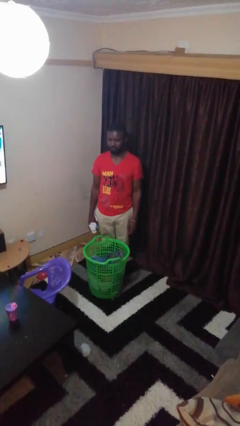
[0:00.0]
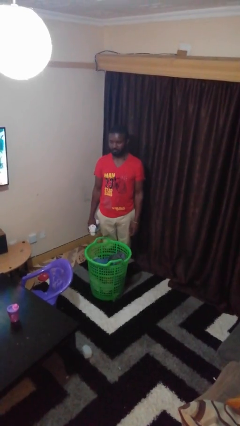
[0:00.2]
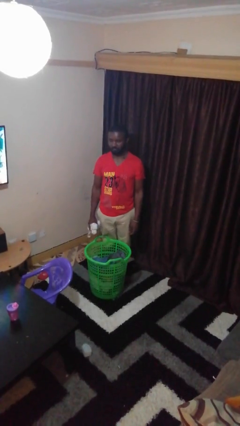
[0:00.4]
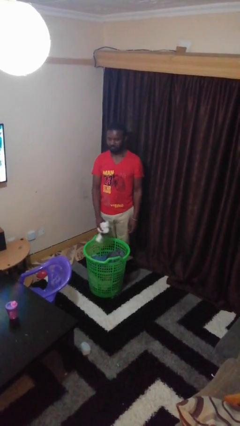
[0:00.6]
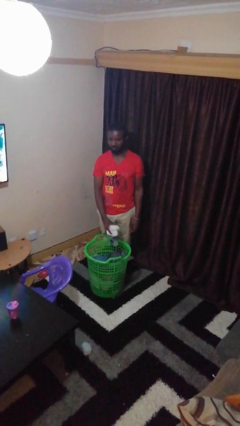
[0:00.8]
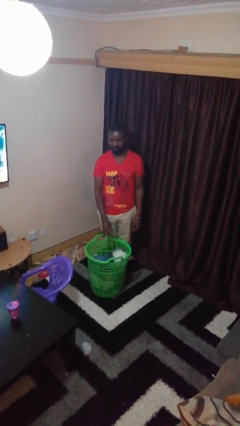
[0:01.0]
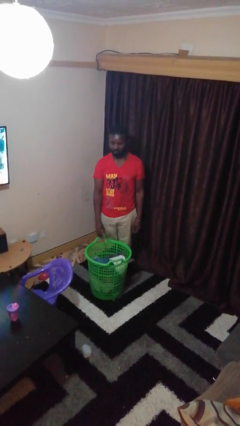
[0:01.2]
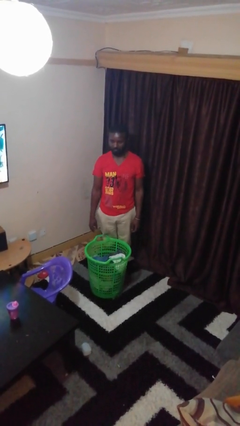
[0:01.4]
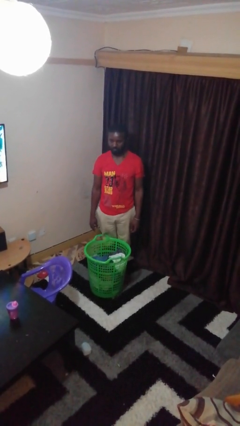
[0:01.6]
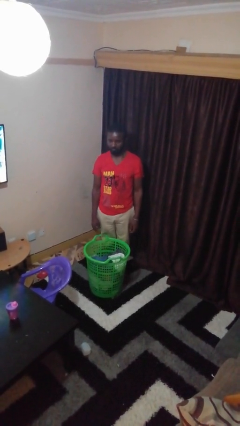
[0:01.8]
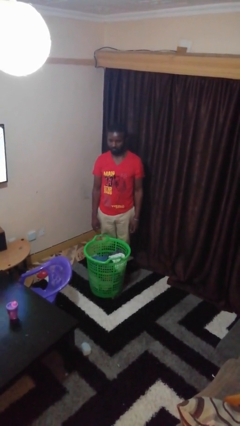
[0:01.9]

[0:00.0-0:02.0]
person puts object into basket

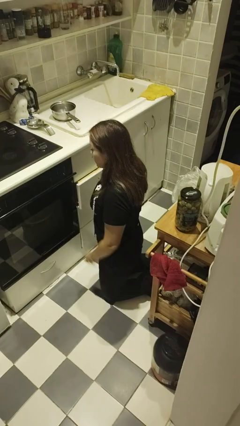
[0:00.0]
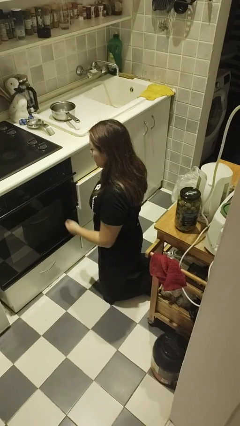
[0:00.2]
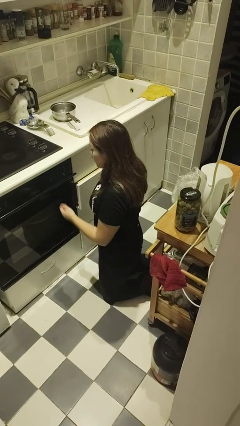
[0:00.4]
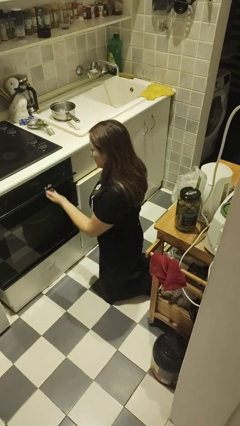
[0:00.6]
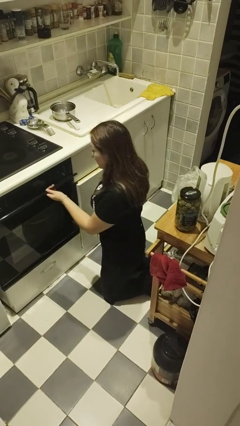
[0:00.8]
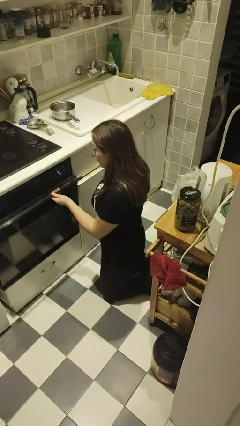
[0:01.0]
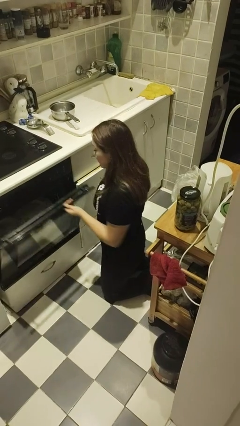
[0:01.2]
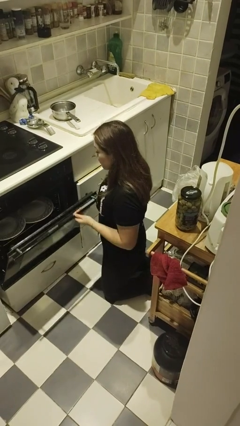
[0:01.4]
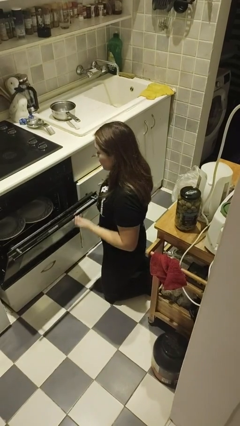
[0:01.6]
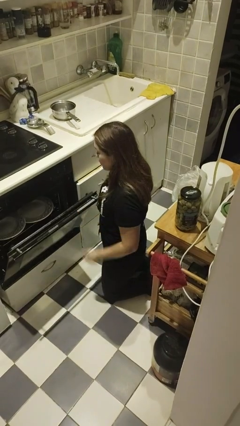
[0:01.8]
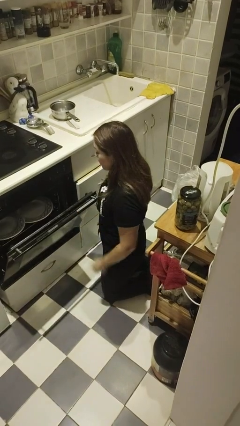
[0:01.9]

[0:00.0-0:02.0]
person opens oven door

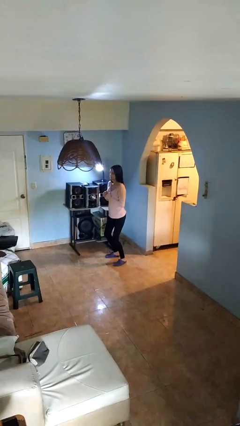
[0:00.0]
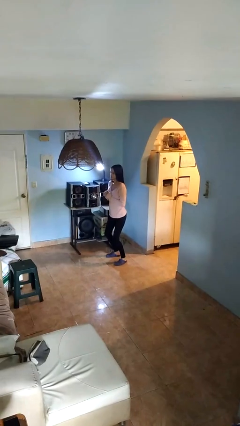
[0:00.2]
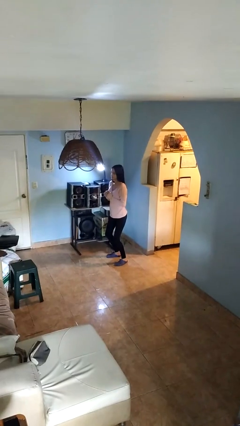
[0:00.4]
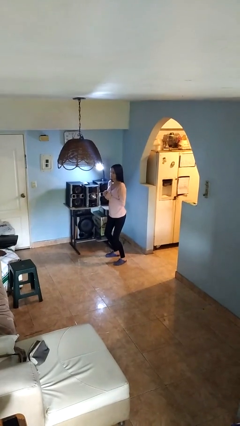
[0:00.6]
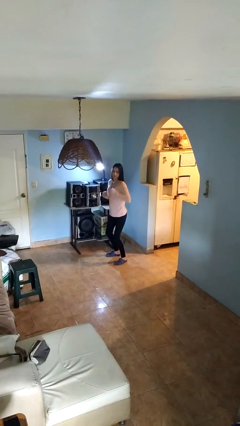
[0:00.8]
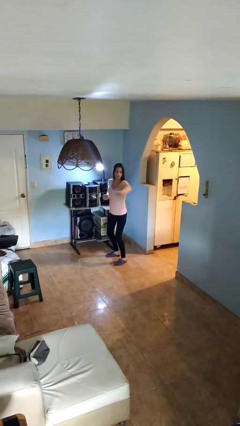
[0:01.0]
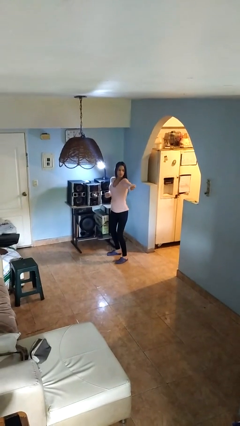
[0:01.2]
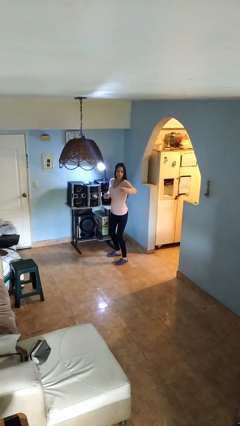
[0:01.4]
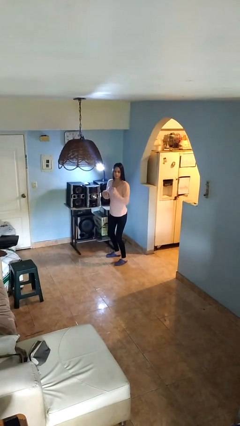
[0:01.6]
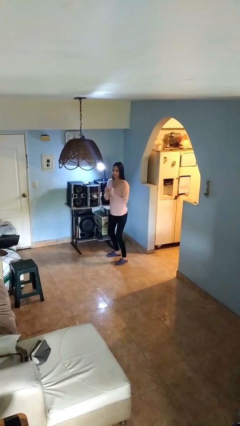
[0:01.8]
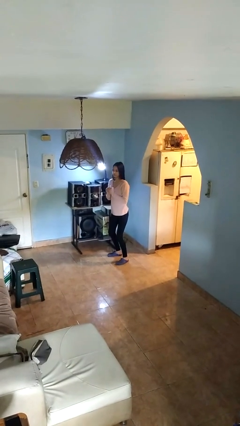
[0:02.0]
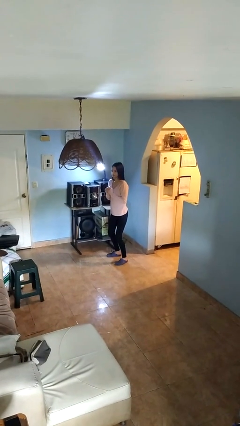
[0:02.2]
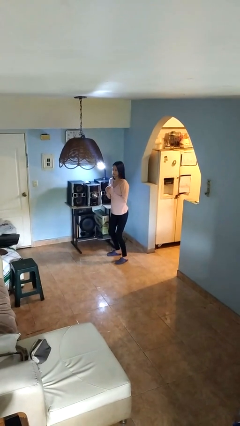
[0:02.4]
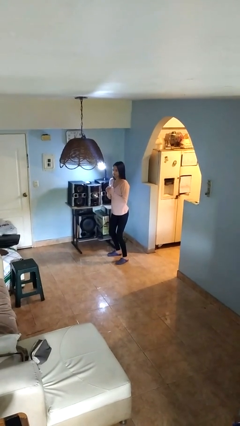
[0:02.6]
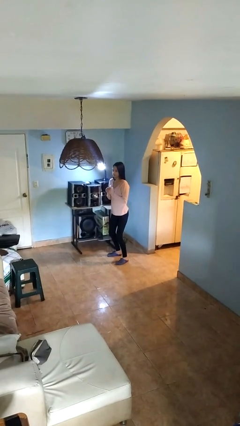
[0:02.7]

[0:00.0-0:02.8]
person karate chop

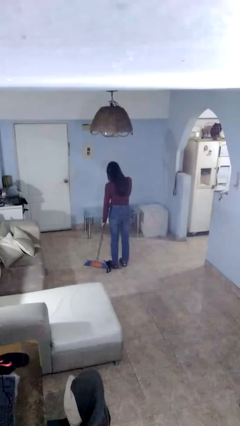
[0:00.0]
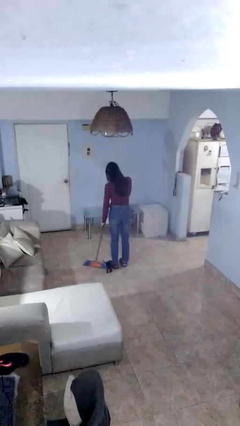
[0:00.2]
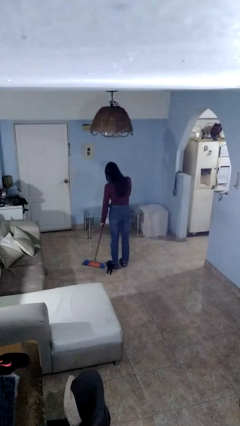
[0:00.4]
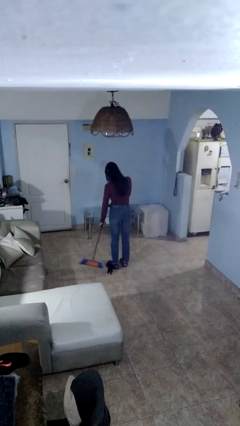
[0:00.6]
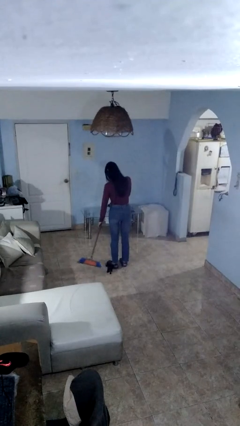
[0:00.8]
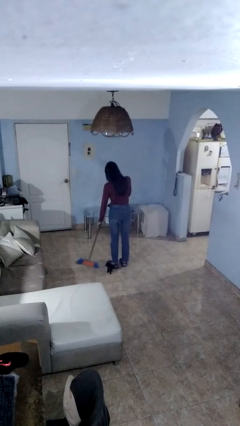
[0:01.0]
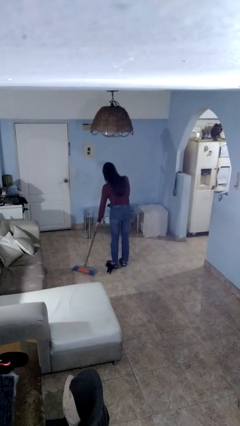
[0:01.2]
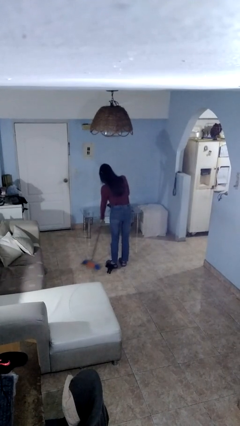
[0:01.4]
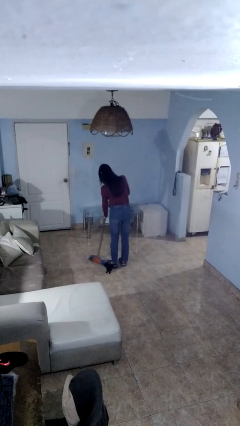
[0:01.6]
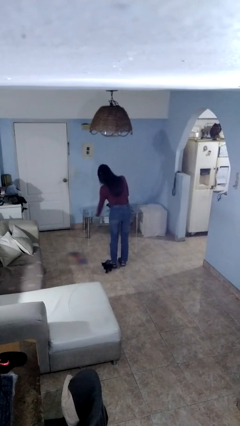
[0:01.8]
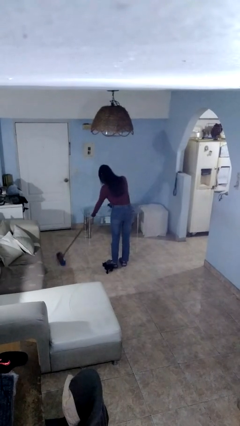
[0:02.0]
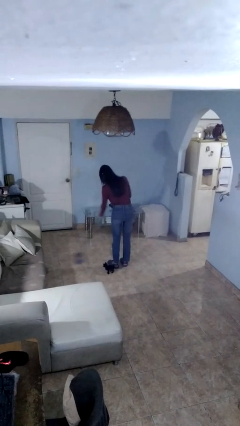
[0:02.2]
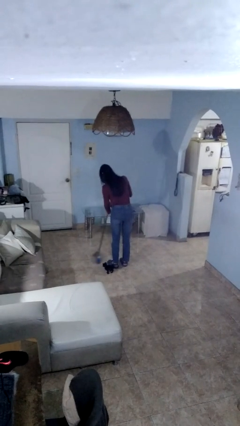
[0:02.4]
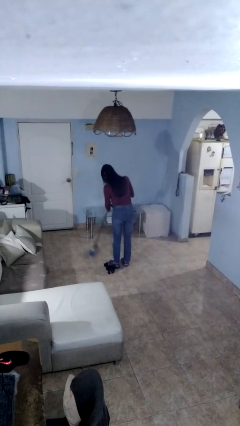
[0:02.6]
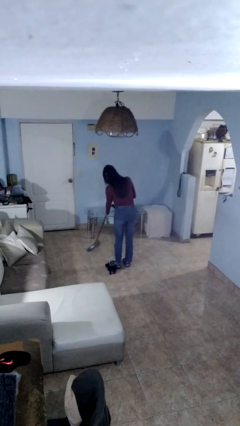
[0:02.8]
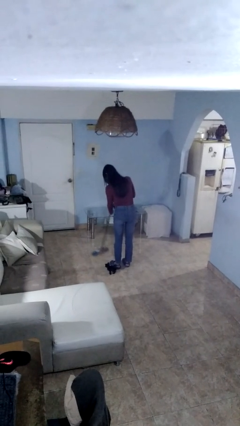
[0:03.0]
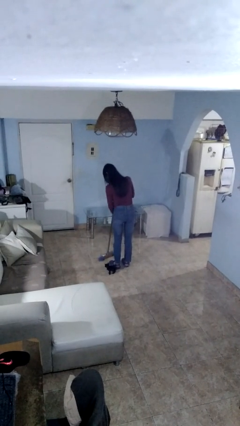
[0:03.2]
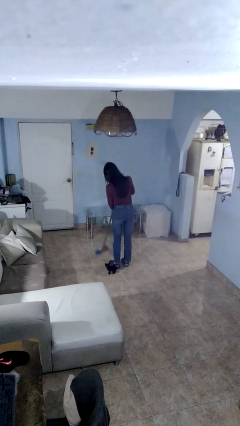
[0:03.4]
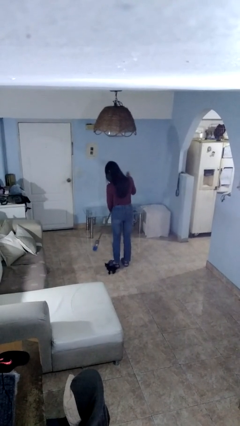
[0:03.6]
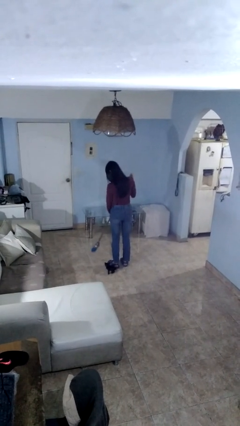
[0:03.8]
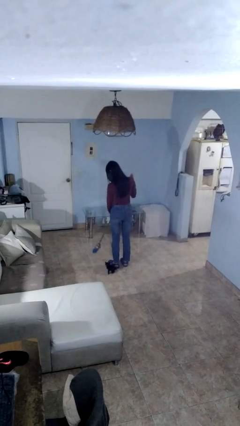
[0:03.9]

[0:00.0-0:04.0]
person sweeps floor

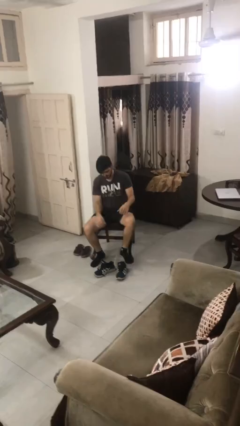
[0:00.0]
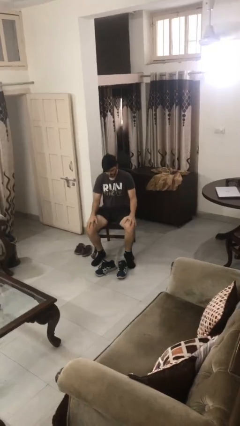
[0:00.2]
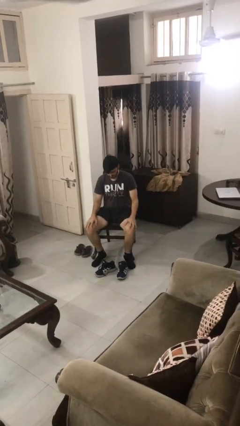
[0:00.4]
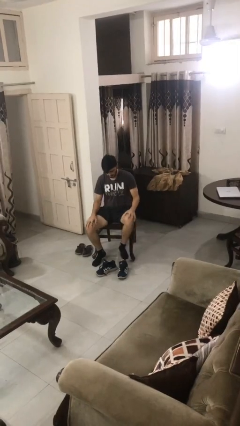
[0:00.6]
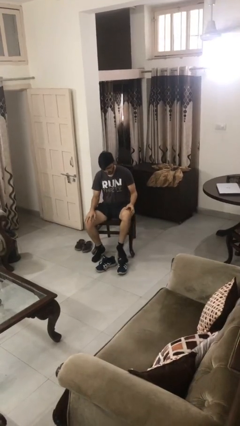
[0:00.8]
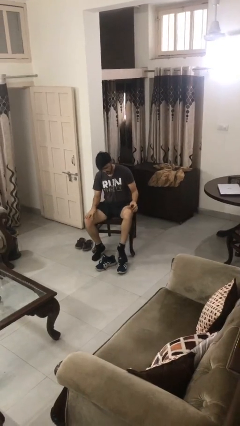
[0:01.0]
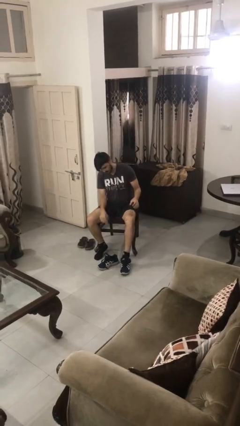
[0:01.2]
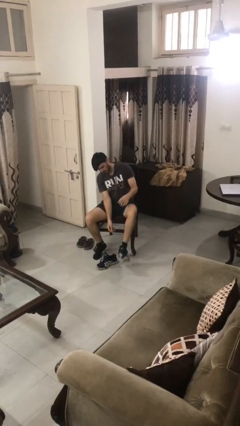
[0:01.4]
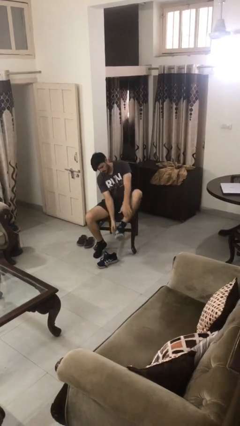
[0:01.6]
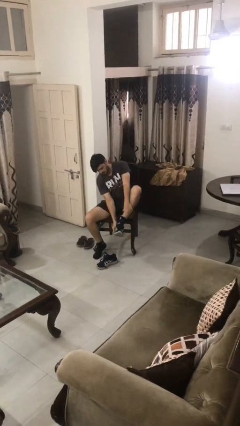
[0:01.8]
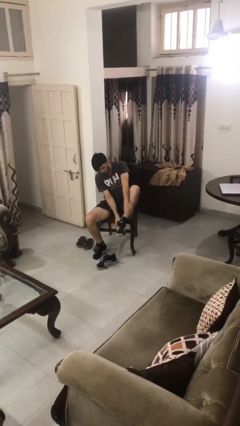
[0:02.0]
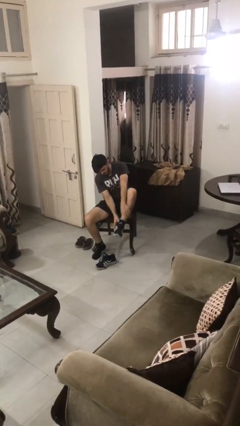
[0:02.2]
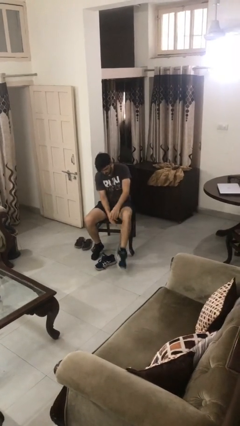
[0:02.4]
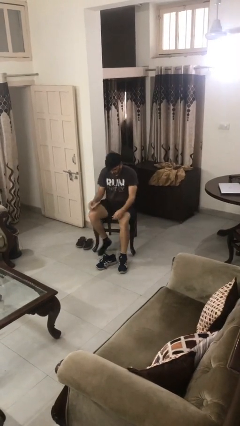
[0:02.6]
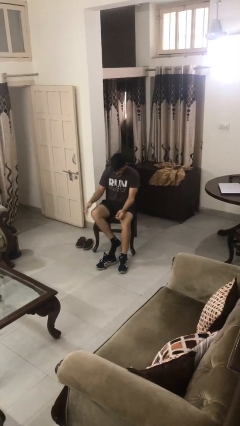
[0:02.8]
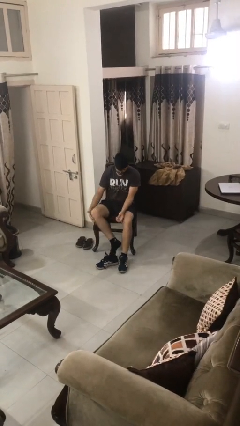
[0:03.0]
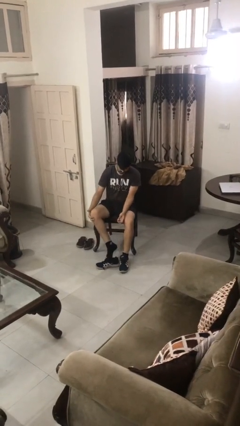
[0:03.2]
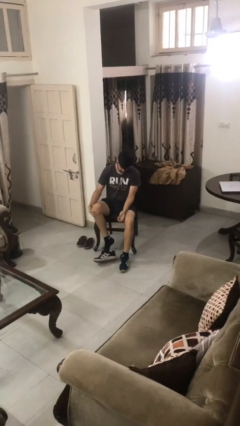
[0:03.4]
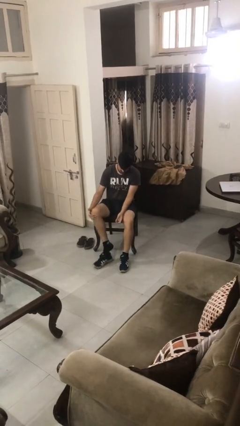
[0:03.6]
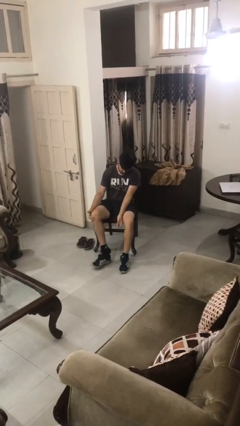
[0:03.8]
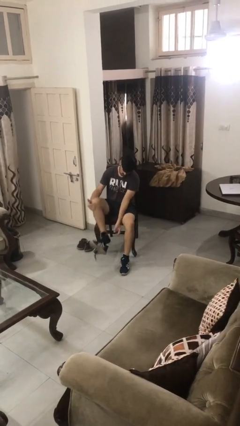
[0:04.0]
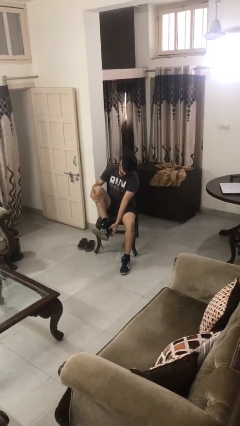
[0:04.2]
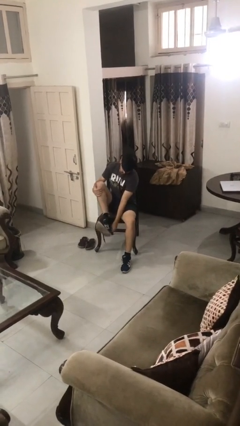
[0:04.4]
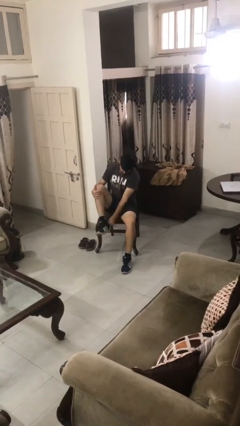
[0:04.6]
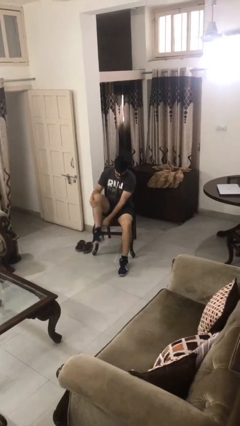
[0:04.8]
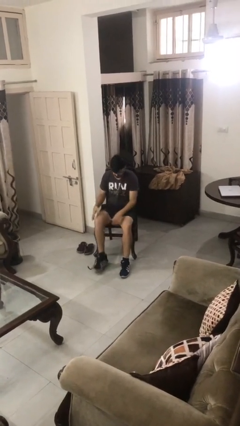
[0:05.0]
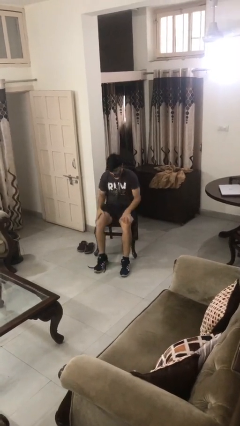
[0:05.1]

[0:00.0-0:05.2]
person puts on shoes

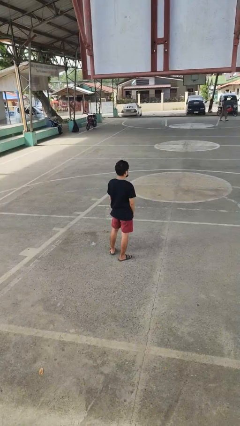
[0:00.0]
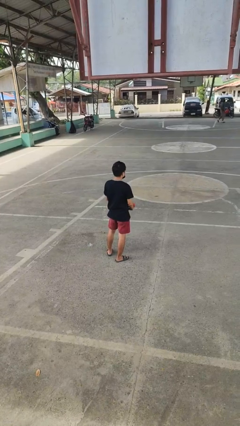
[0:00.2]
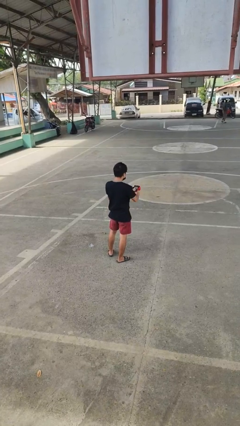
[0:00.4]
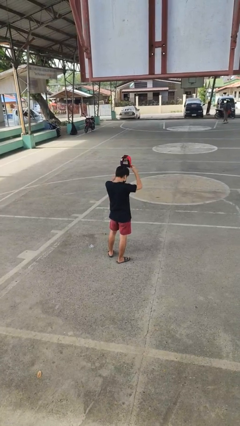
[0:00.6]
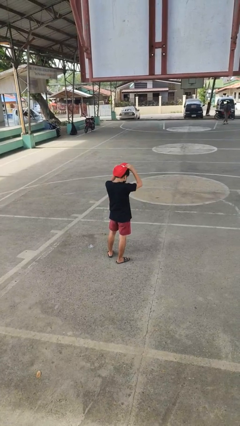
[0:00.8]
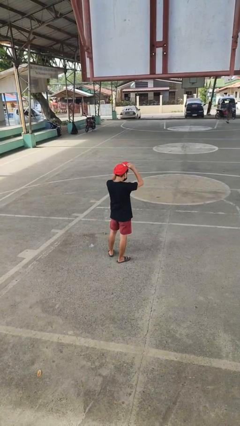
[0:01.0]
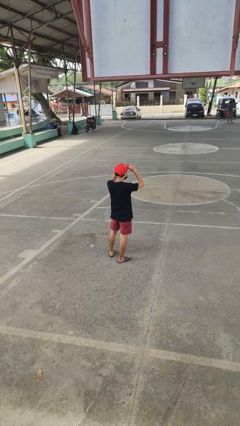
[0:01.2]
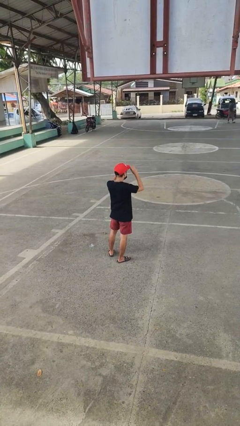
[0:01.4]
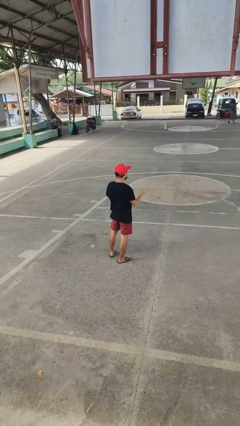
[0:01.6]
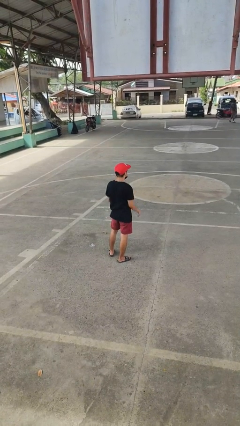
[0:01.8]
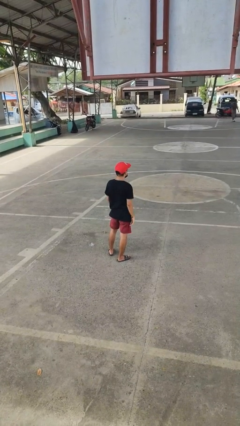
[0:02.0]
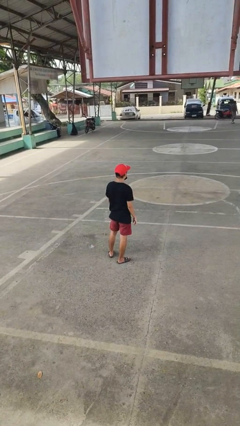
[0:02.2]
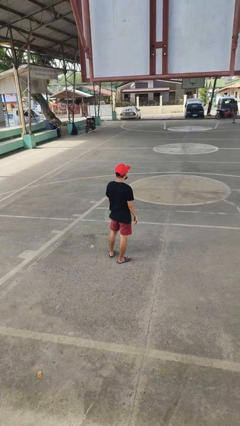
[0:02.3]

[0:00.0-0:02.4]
person puts on hat
